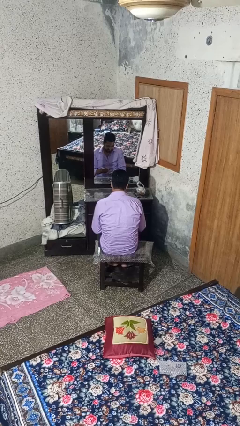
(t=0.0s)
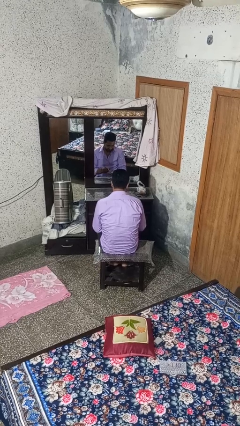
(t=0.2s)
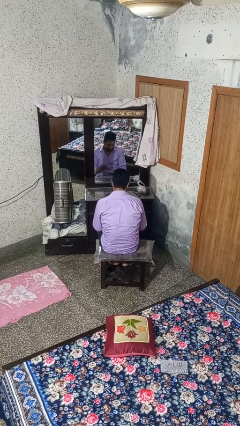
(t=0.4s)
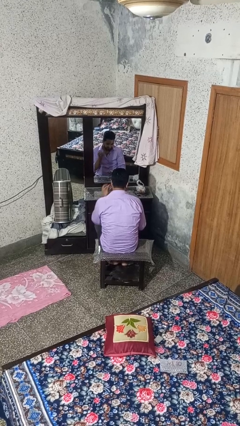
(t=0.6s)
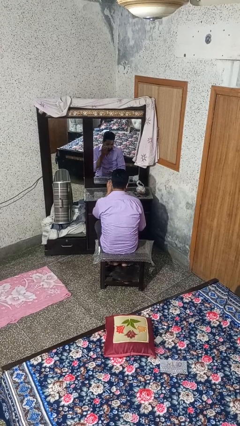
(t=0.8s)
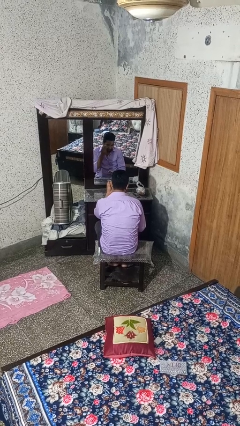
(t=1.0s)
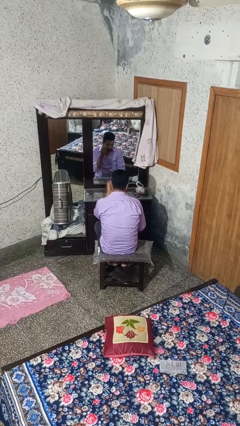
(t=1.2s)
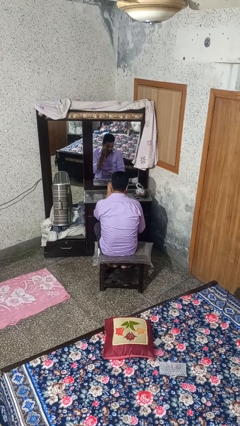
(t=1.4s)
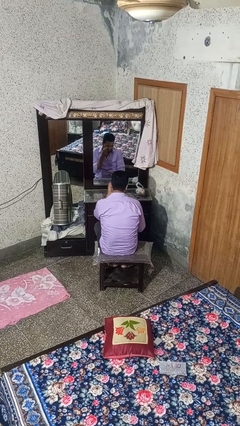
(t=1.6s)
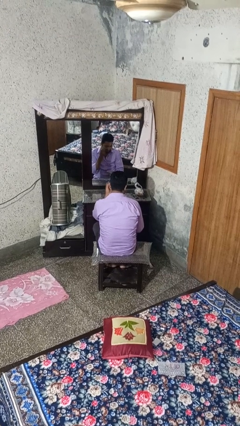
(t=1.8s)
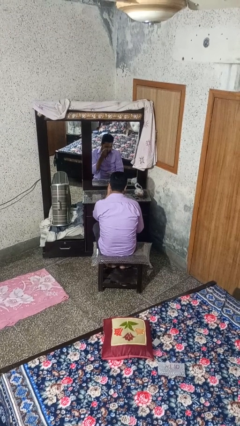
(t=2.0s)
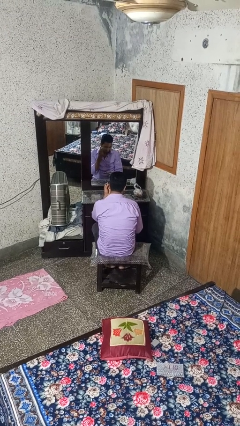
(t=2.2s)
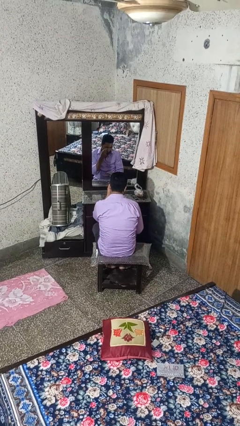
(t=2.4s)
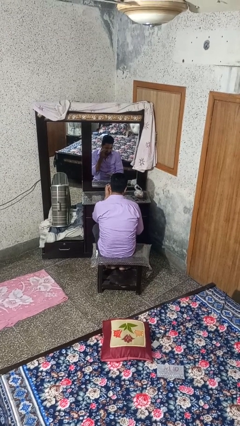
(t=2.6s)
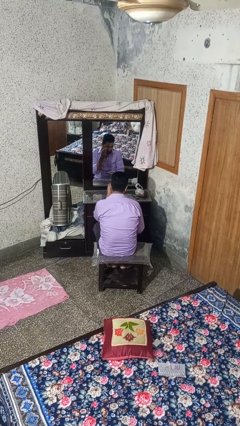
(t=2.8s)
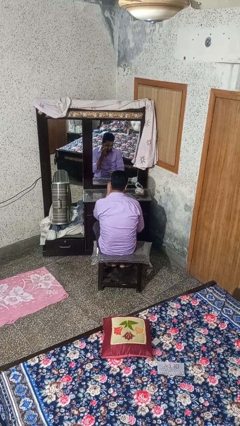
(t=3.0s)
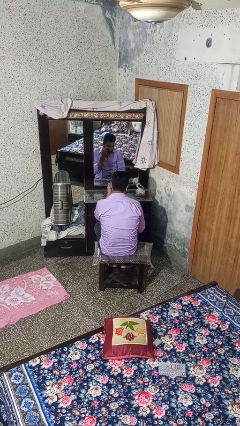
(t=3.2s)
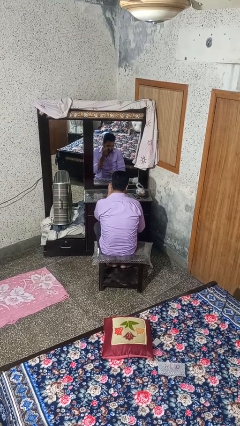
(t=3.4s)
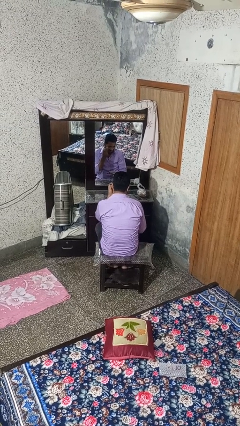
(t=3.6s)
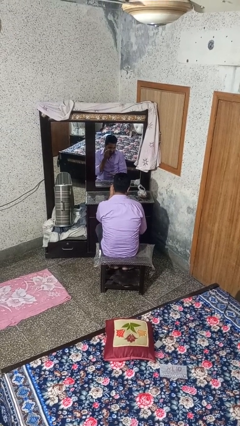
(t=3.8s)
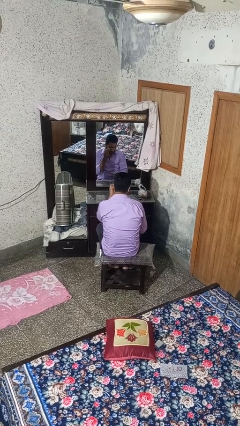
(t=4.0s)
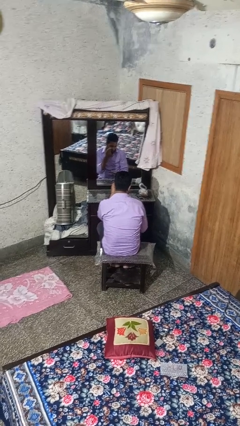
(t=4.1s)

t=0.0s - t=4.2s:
person applies eye makeup

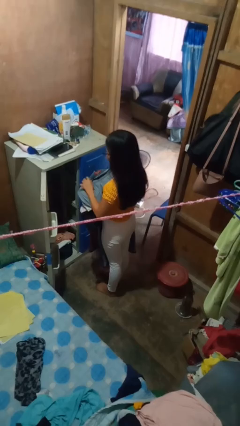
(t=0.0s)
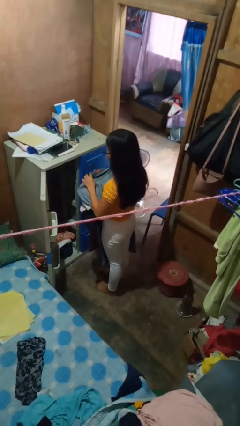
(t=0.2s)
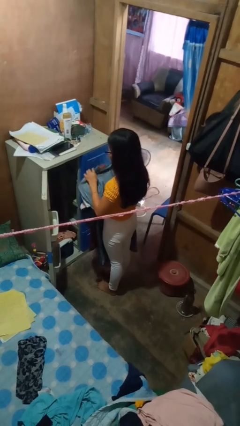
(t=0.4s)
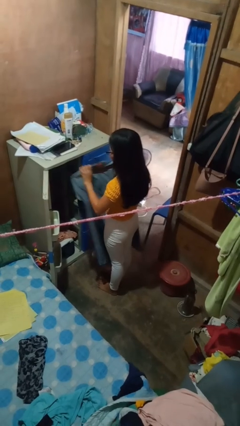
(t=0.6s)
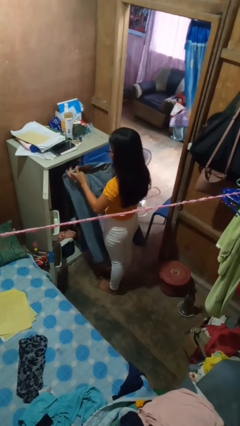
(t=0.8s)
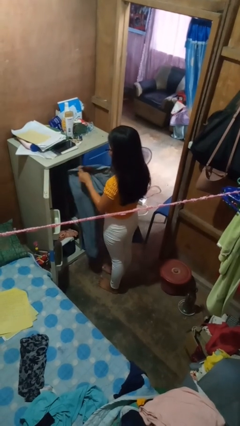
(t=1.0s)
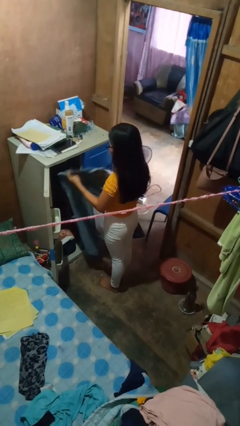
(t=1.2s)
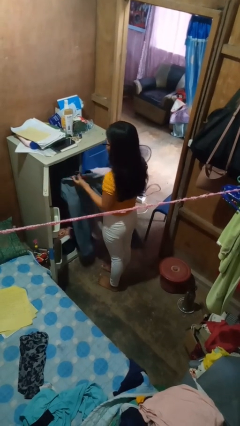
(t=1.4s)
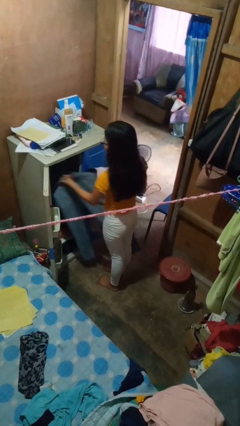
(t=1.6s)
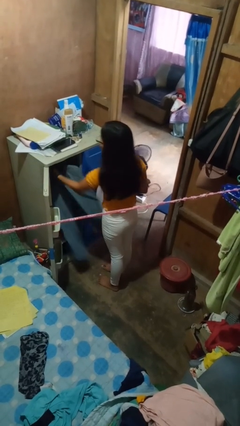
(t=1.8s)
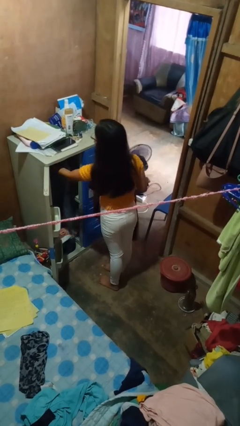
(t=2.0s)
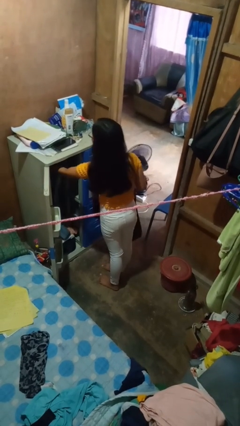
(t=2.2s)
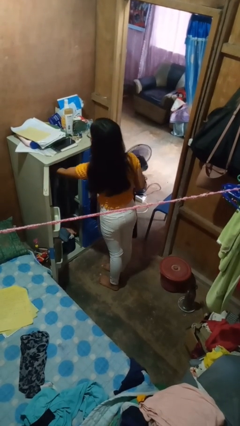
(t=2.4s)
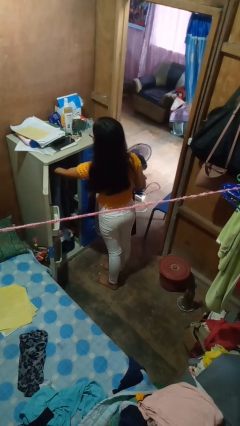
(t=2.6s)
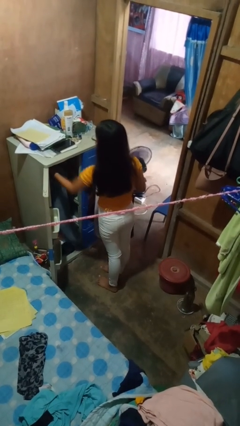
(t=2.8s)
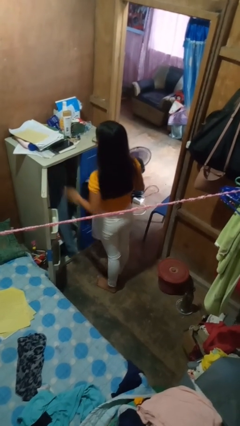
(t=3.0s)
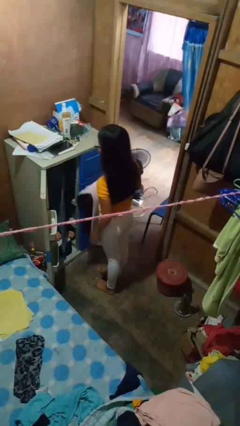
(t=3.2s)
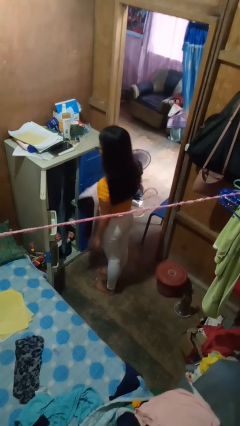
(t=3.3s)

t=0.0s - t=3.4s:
person puts clothes into closet

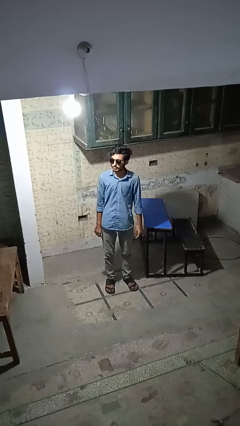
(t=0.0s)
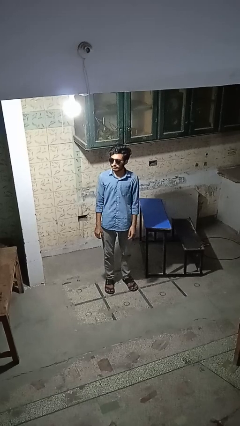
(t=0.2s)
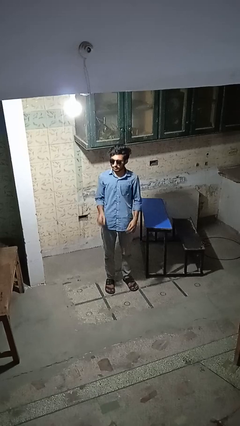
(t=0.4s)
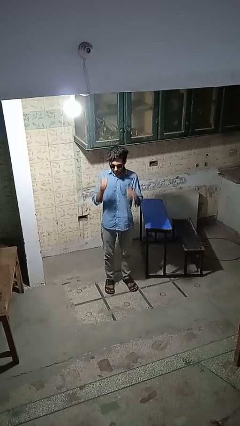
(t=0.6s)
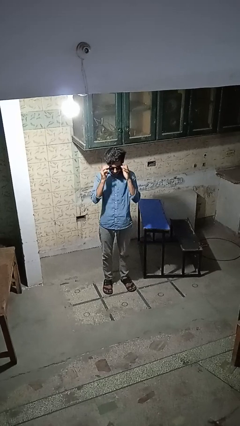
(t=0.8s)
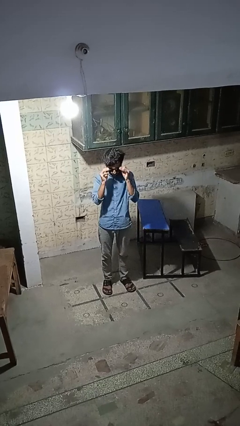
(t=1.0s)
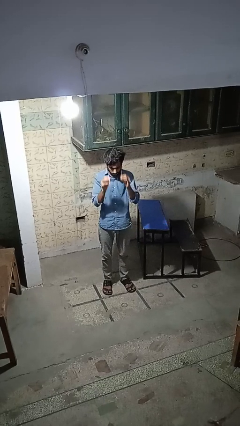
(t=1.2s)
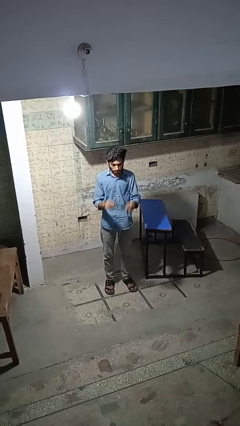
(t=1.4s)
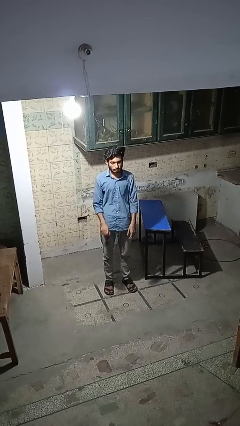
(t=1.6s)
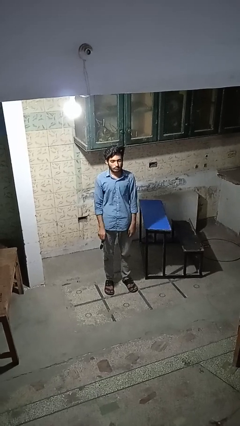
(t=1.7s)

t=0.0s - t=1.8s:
person takes off sunglasses

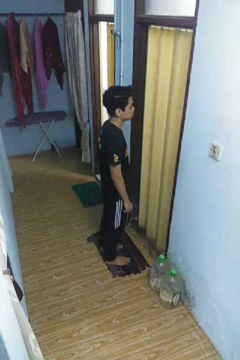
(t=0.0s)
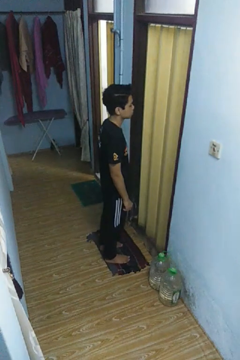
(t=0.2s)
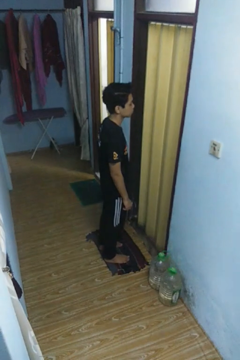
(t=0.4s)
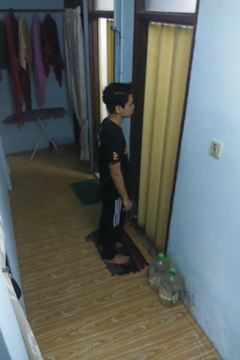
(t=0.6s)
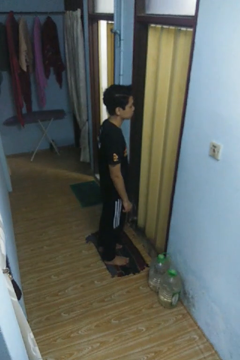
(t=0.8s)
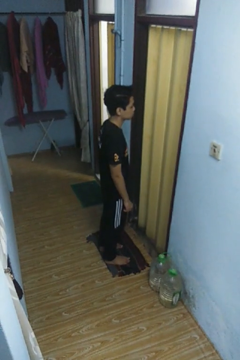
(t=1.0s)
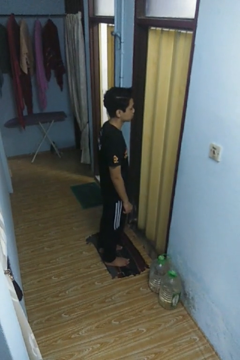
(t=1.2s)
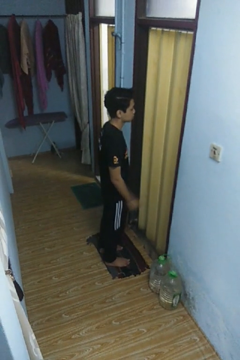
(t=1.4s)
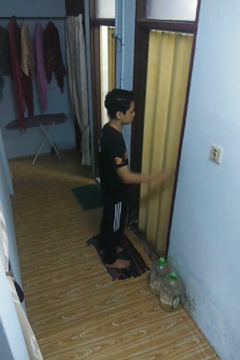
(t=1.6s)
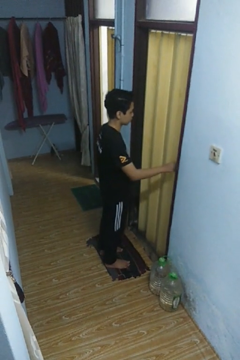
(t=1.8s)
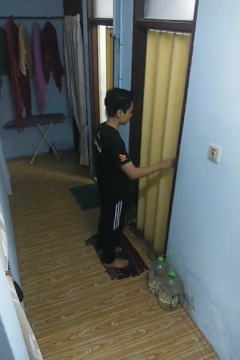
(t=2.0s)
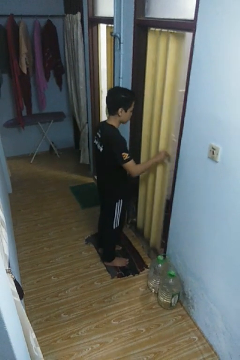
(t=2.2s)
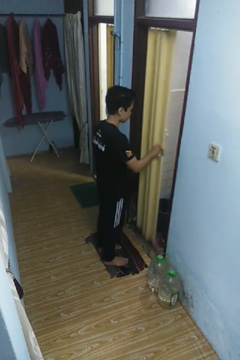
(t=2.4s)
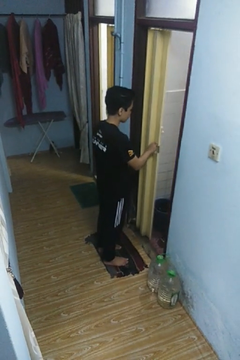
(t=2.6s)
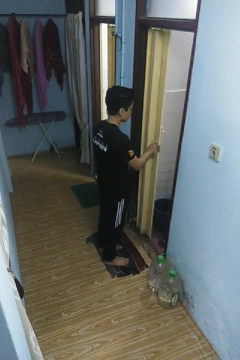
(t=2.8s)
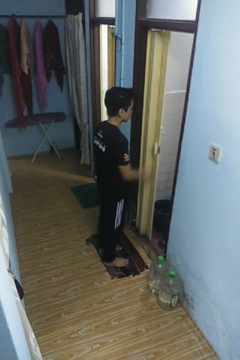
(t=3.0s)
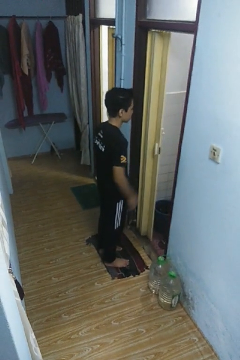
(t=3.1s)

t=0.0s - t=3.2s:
person opens sliding door

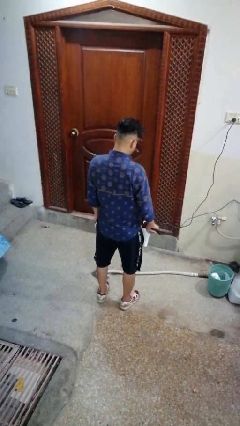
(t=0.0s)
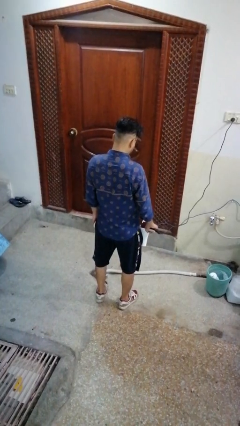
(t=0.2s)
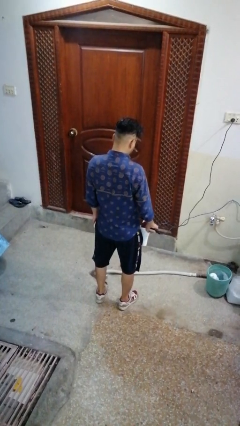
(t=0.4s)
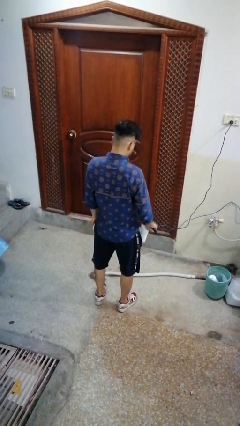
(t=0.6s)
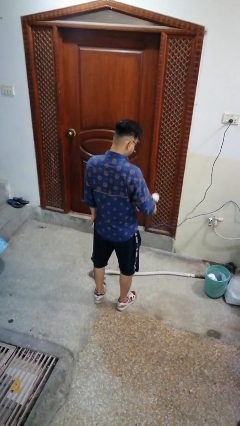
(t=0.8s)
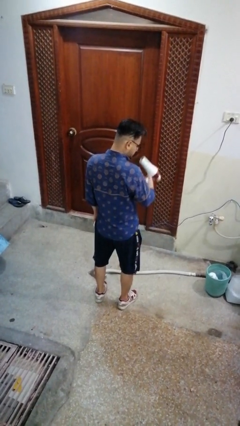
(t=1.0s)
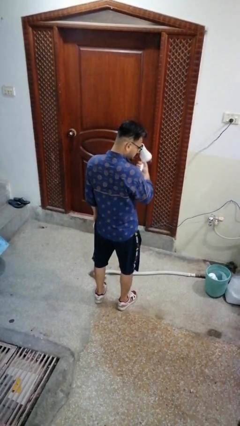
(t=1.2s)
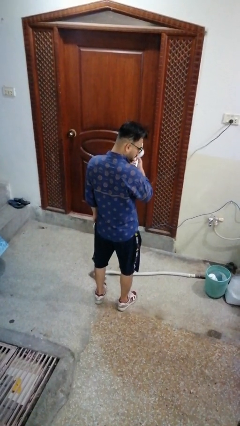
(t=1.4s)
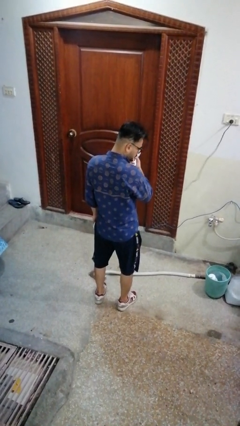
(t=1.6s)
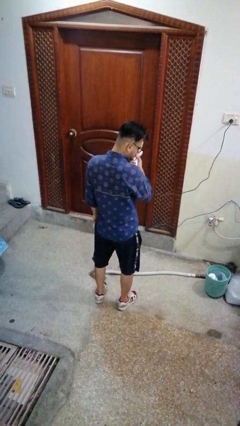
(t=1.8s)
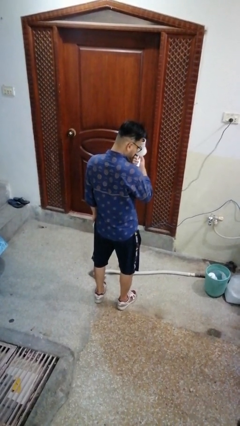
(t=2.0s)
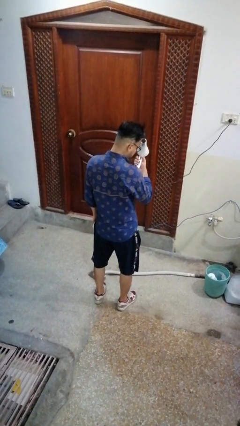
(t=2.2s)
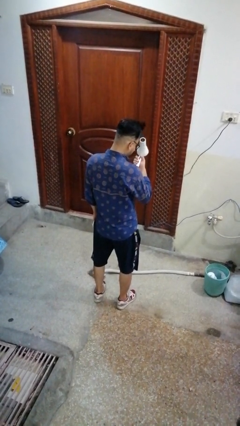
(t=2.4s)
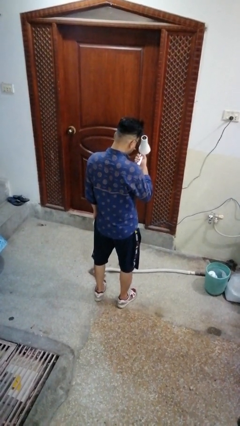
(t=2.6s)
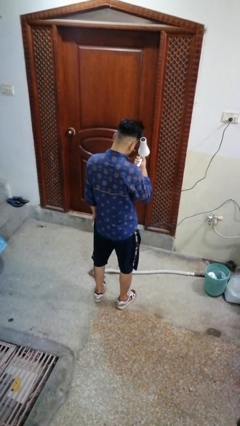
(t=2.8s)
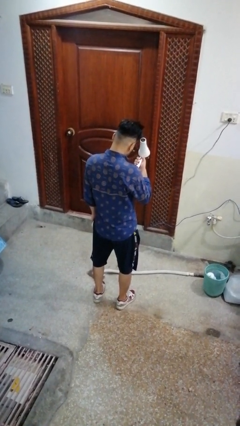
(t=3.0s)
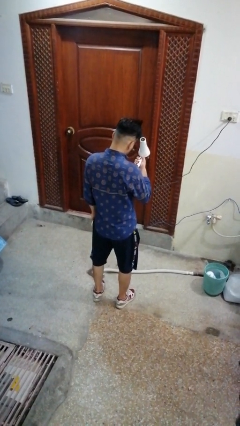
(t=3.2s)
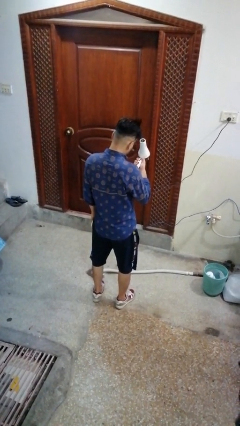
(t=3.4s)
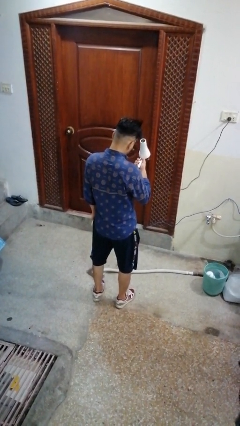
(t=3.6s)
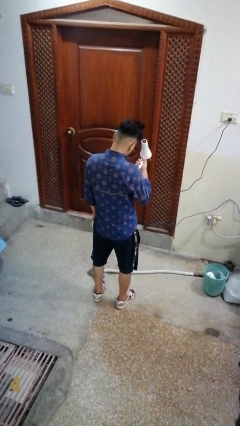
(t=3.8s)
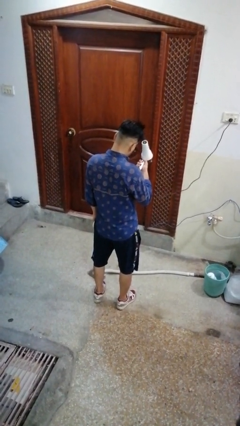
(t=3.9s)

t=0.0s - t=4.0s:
person dries hair with hairdryer

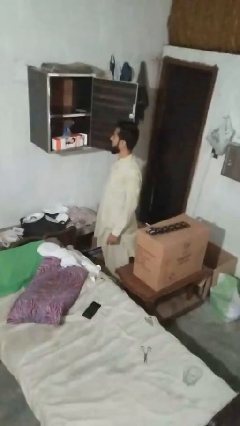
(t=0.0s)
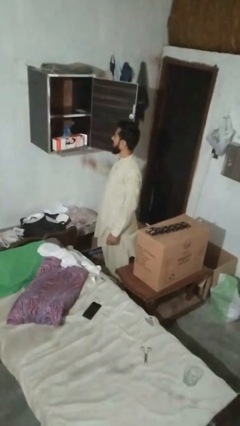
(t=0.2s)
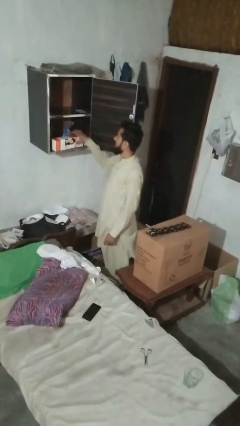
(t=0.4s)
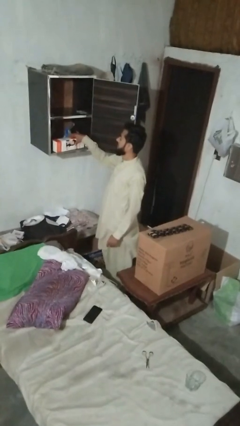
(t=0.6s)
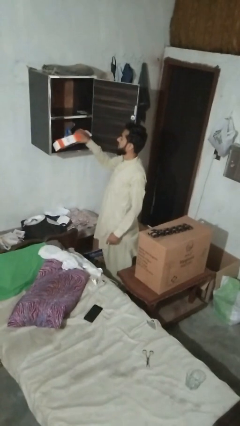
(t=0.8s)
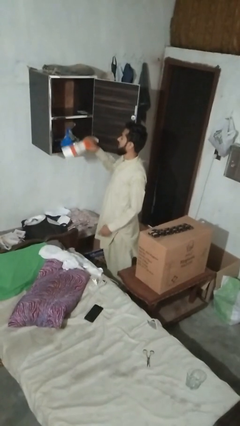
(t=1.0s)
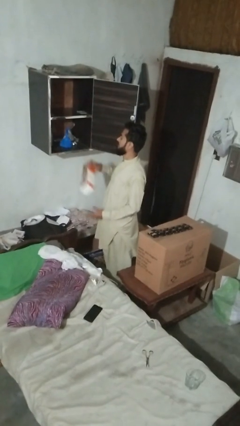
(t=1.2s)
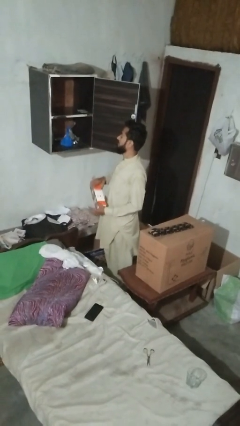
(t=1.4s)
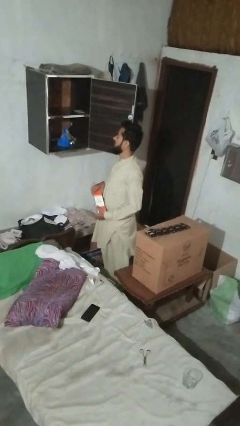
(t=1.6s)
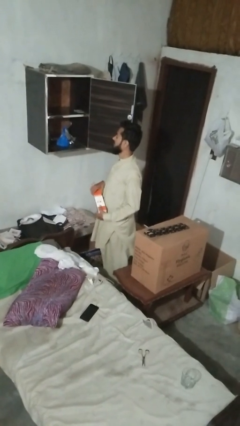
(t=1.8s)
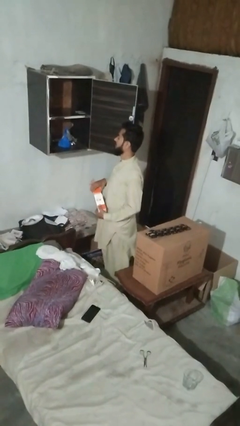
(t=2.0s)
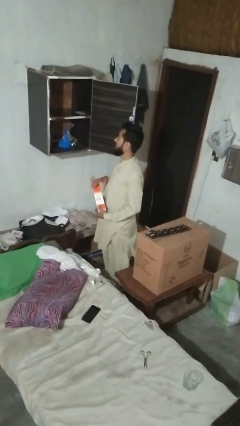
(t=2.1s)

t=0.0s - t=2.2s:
person picks up object from cabinet
